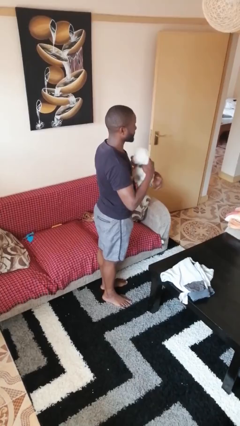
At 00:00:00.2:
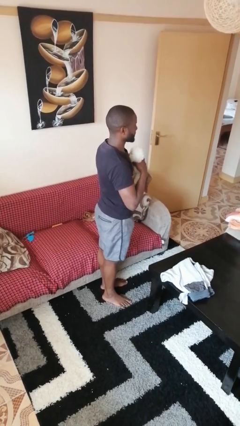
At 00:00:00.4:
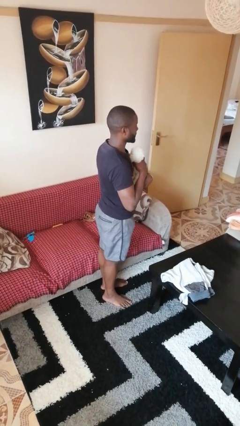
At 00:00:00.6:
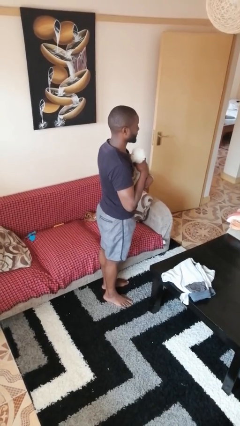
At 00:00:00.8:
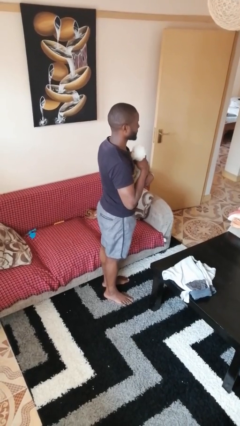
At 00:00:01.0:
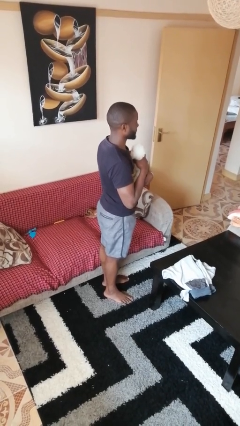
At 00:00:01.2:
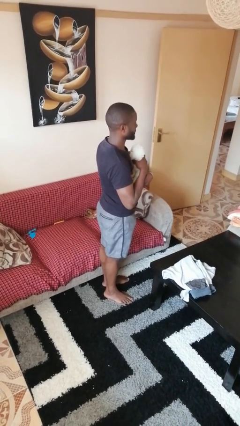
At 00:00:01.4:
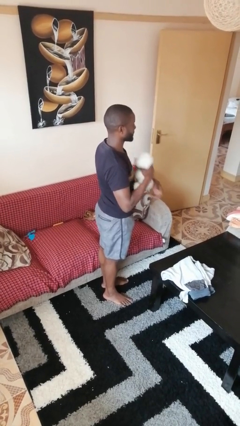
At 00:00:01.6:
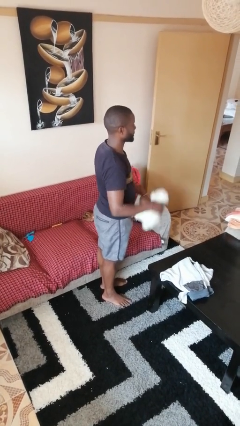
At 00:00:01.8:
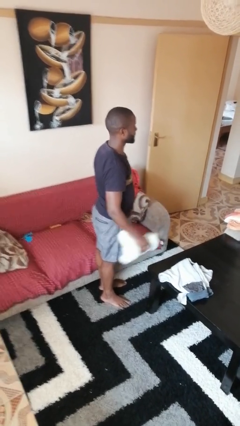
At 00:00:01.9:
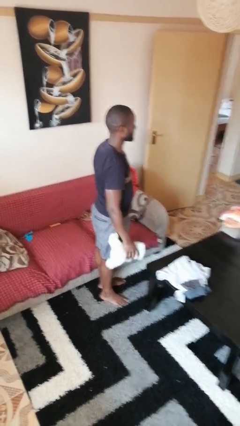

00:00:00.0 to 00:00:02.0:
person hugs stuffed animal

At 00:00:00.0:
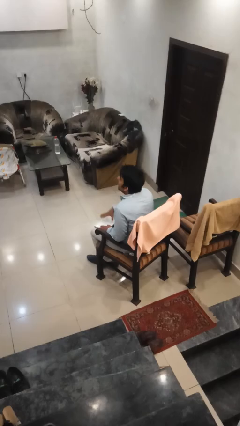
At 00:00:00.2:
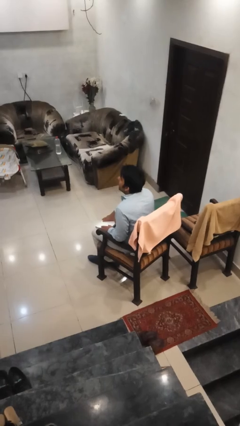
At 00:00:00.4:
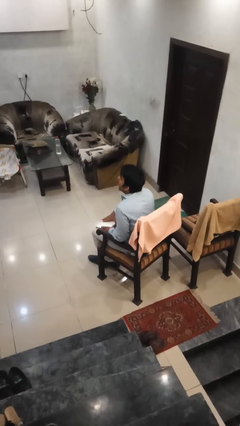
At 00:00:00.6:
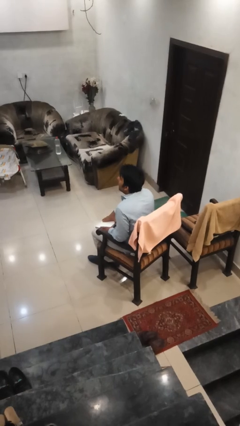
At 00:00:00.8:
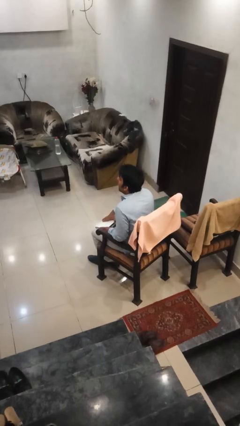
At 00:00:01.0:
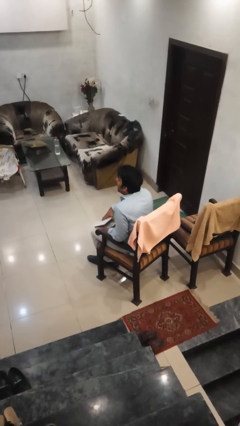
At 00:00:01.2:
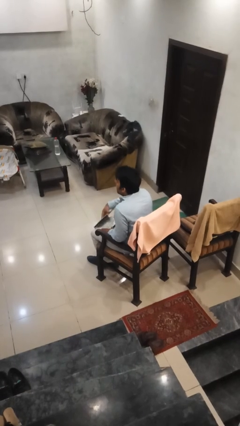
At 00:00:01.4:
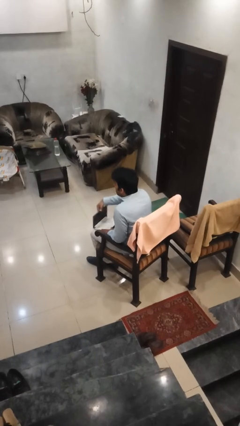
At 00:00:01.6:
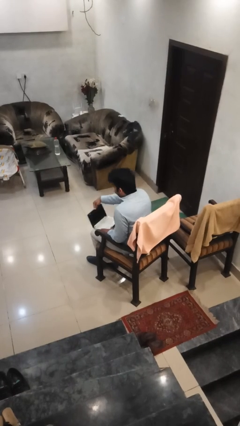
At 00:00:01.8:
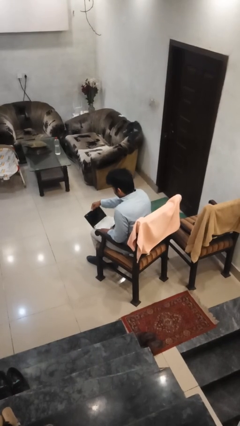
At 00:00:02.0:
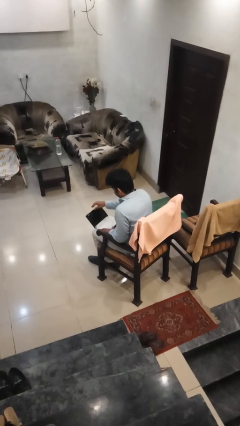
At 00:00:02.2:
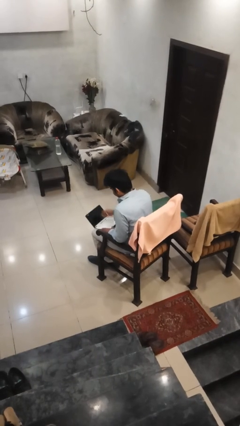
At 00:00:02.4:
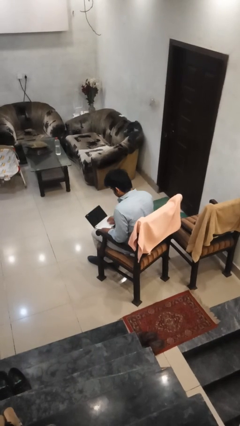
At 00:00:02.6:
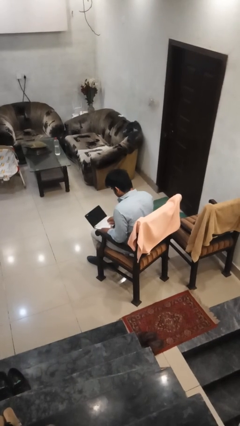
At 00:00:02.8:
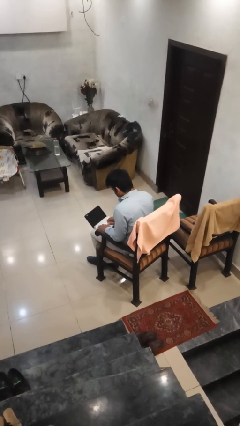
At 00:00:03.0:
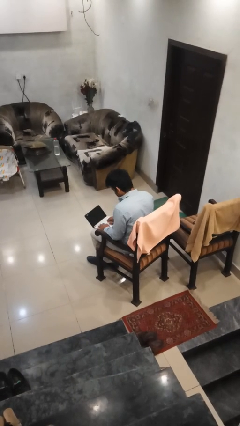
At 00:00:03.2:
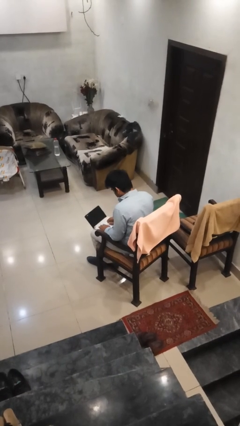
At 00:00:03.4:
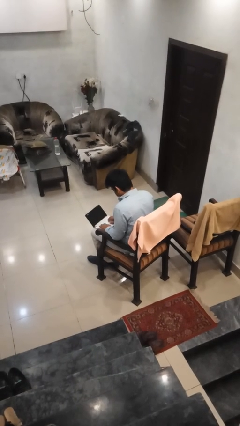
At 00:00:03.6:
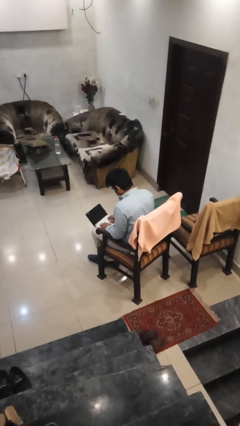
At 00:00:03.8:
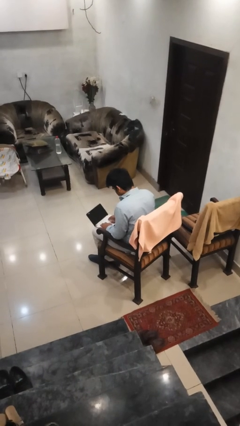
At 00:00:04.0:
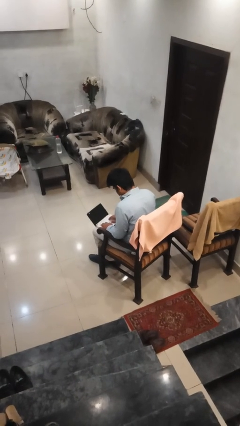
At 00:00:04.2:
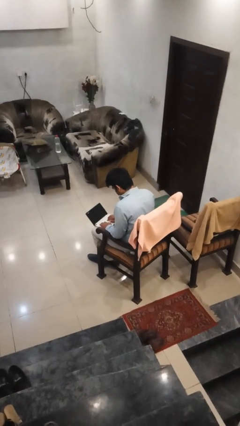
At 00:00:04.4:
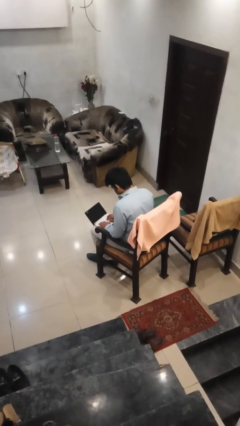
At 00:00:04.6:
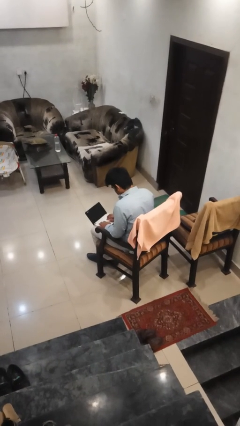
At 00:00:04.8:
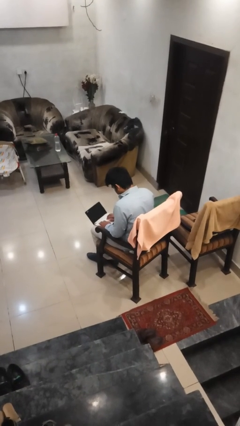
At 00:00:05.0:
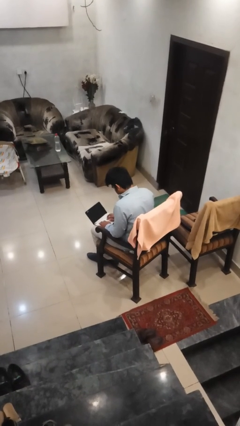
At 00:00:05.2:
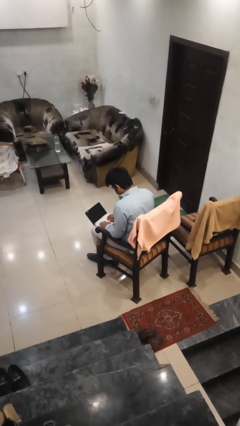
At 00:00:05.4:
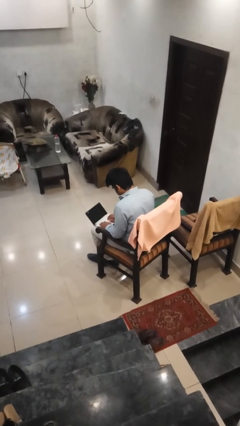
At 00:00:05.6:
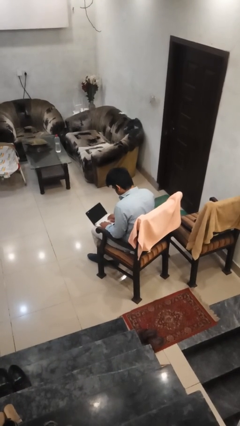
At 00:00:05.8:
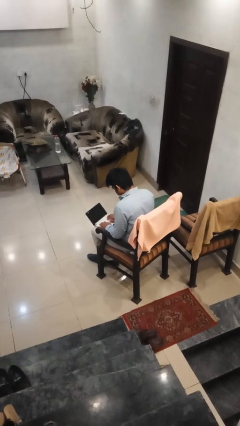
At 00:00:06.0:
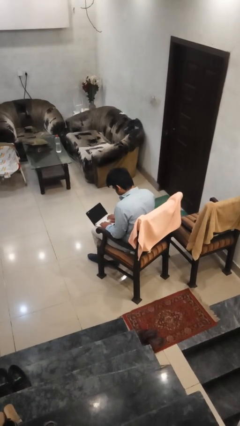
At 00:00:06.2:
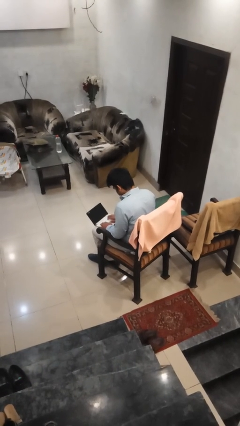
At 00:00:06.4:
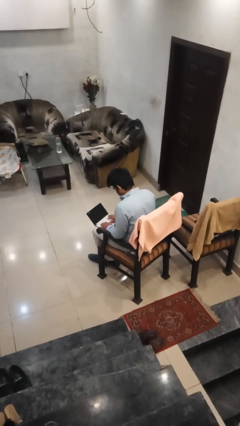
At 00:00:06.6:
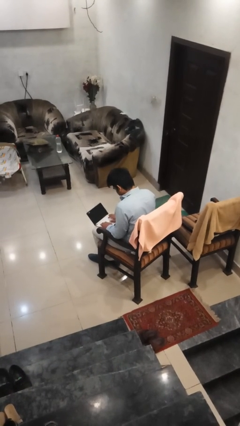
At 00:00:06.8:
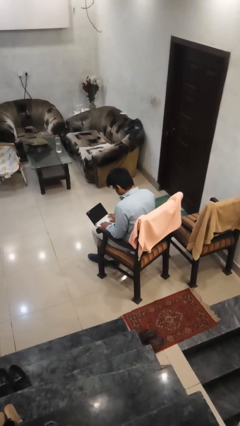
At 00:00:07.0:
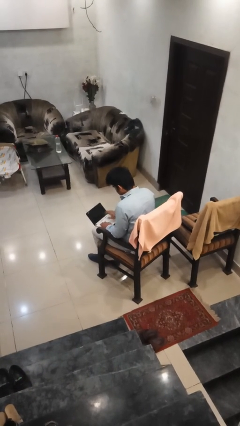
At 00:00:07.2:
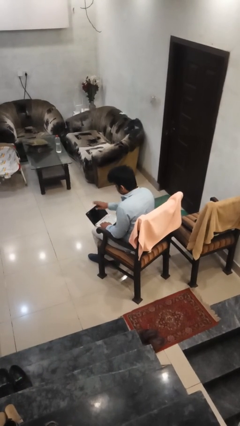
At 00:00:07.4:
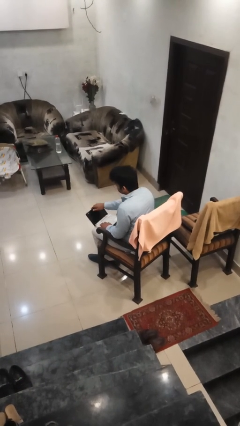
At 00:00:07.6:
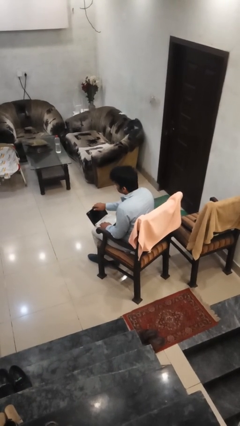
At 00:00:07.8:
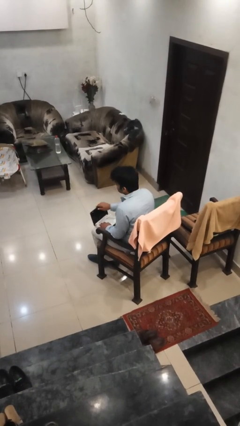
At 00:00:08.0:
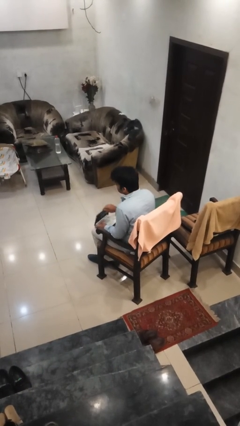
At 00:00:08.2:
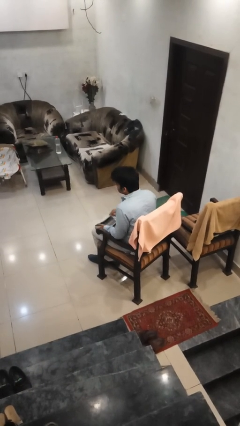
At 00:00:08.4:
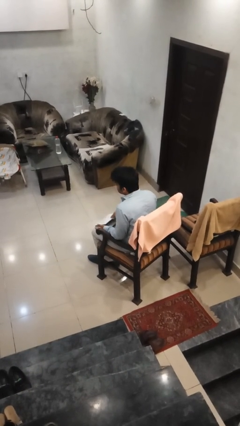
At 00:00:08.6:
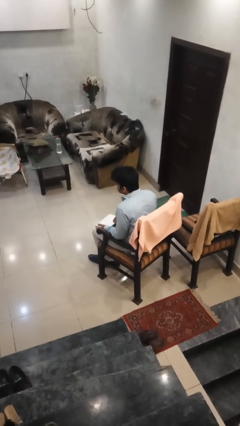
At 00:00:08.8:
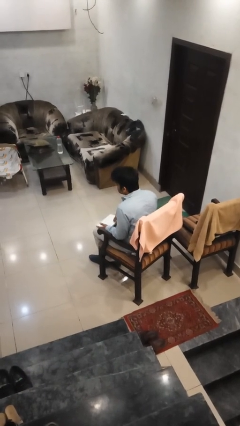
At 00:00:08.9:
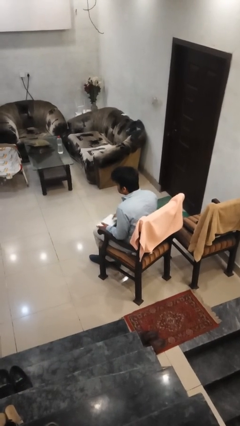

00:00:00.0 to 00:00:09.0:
person interacts with laptop

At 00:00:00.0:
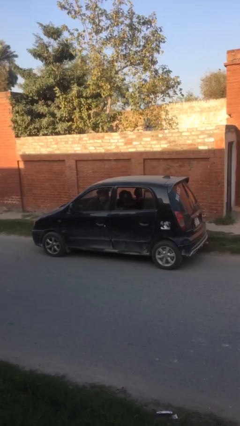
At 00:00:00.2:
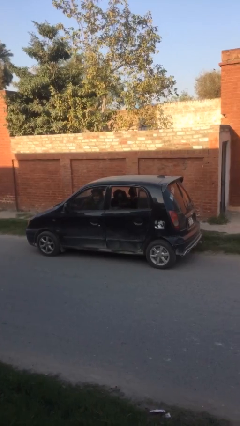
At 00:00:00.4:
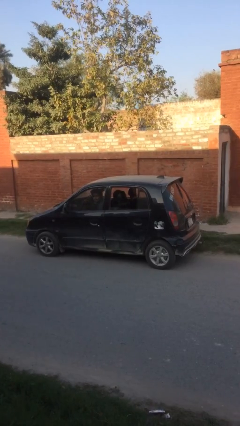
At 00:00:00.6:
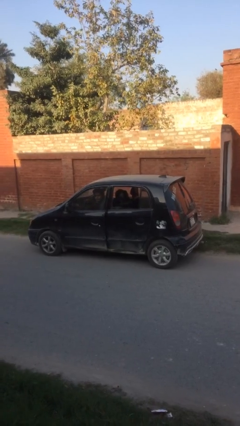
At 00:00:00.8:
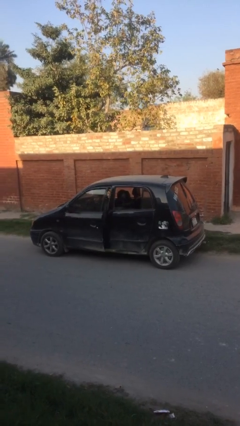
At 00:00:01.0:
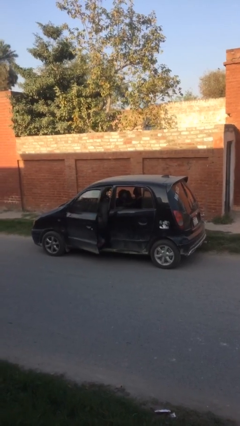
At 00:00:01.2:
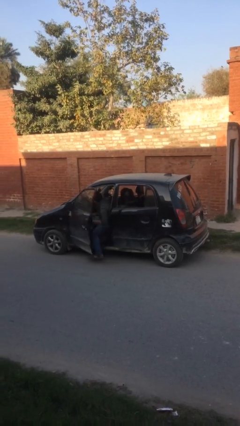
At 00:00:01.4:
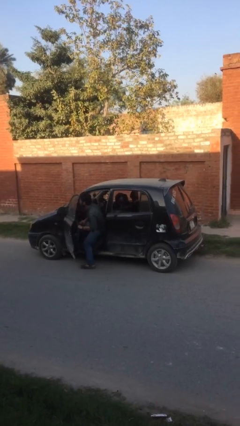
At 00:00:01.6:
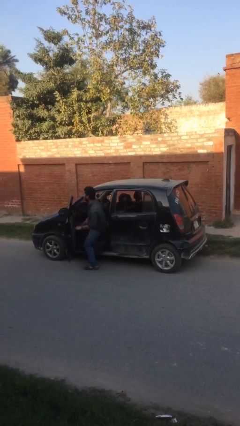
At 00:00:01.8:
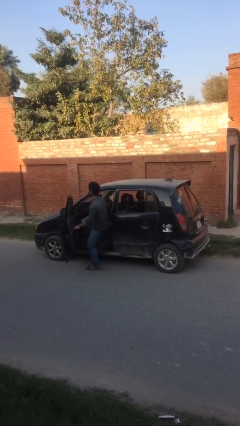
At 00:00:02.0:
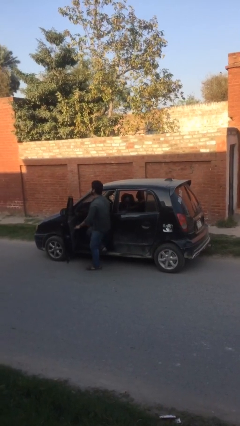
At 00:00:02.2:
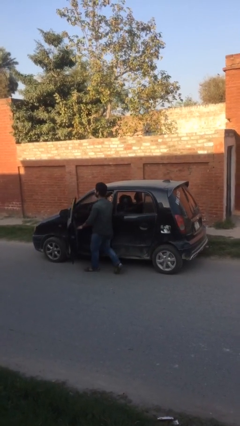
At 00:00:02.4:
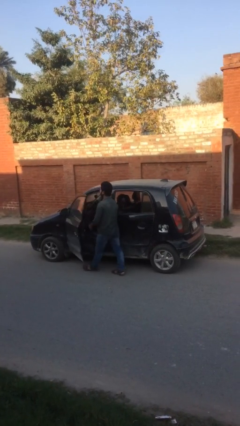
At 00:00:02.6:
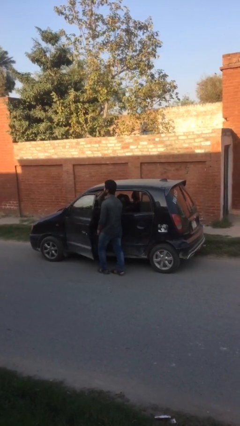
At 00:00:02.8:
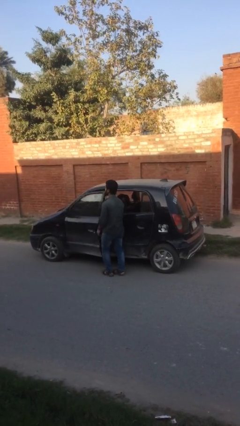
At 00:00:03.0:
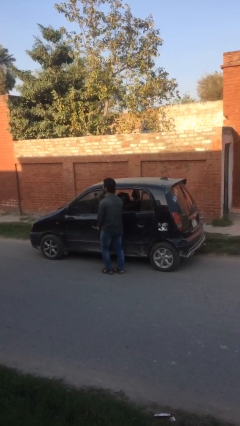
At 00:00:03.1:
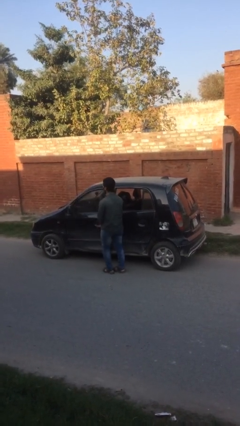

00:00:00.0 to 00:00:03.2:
car drops off person

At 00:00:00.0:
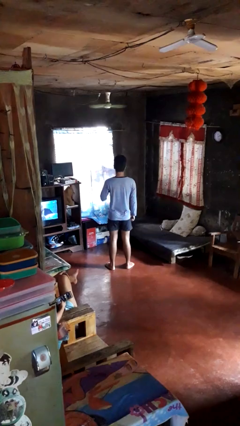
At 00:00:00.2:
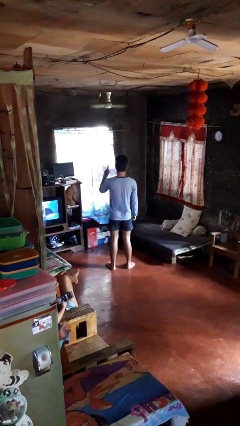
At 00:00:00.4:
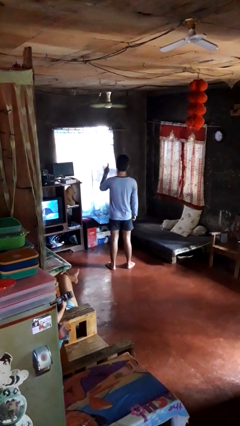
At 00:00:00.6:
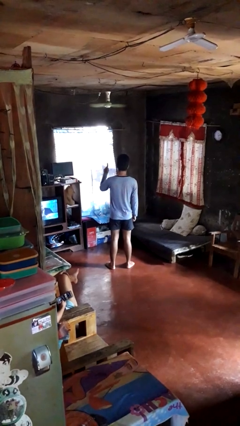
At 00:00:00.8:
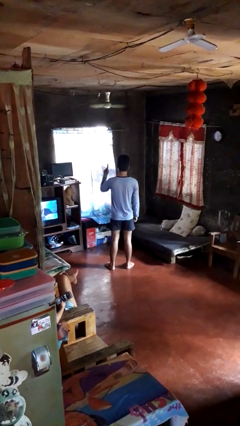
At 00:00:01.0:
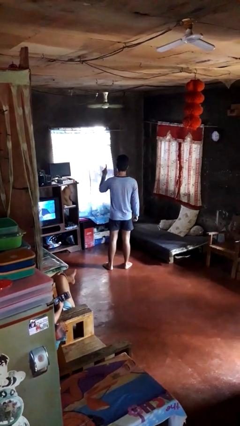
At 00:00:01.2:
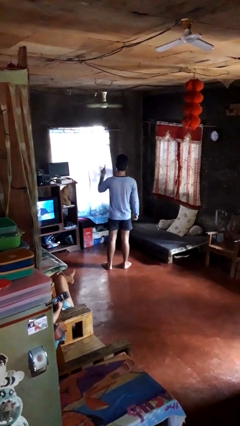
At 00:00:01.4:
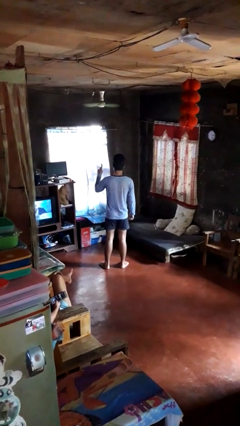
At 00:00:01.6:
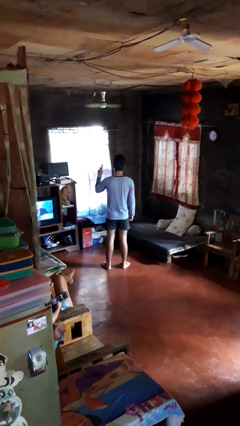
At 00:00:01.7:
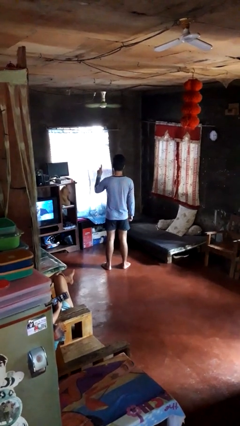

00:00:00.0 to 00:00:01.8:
person gestures number one

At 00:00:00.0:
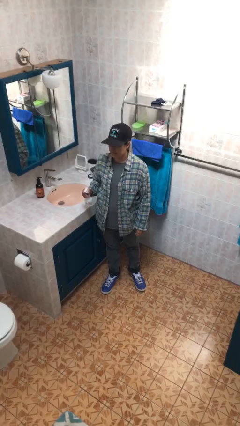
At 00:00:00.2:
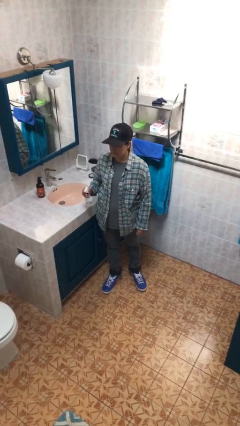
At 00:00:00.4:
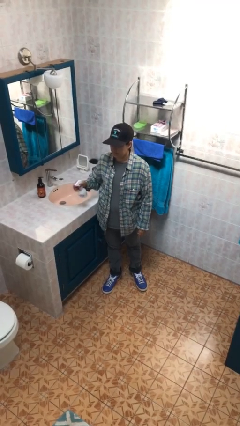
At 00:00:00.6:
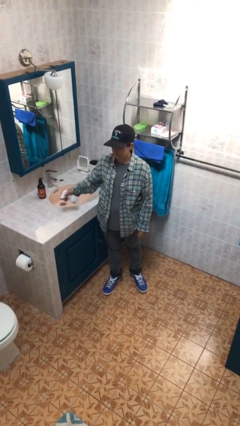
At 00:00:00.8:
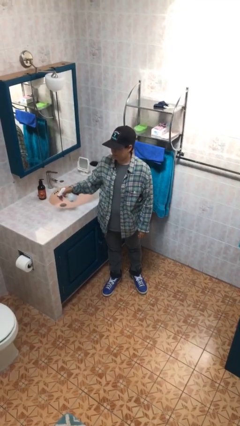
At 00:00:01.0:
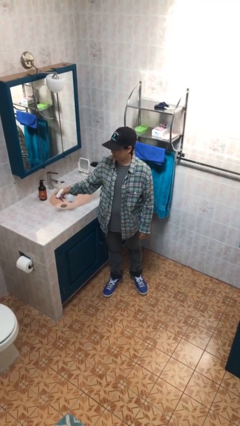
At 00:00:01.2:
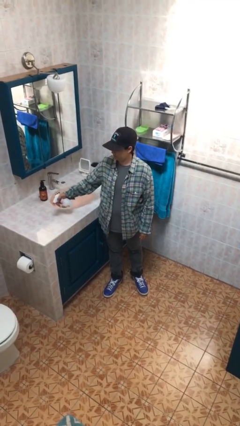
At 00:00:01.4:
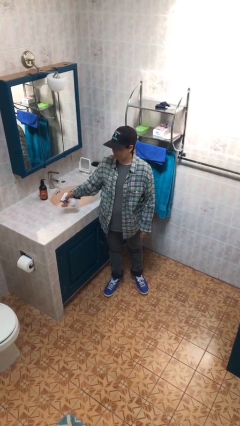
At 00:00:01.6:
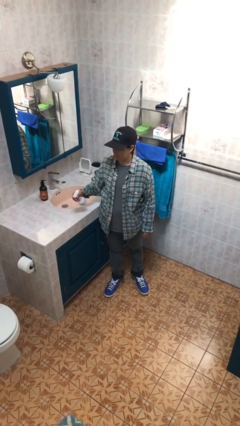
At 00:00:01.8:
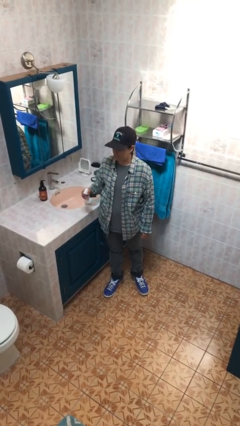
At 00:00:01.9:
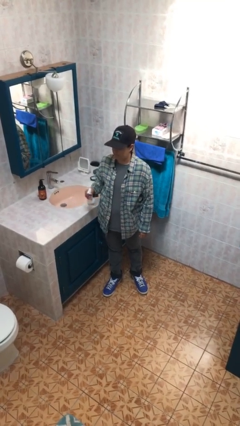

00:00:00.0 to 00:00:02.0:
person sprays from bottle
